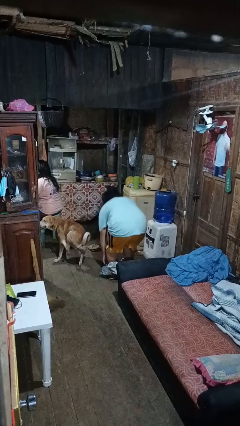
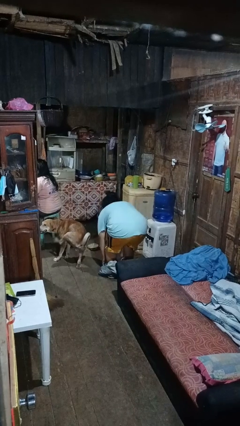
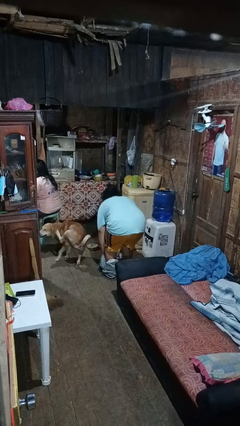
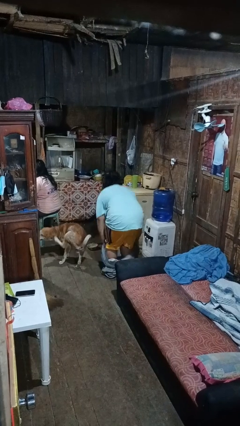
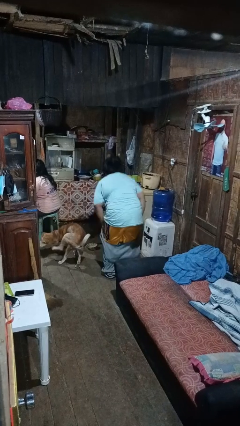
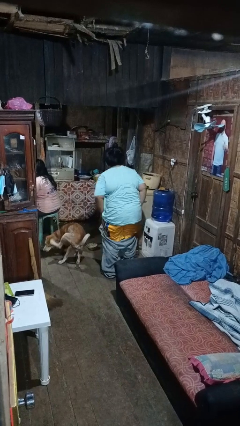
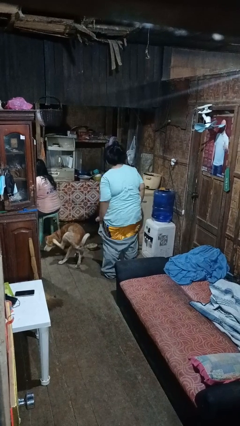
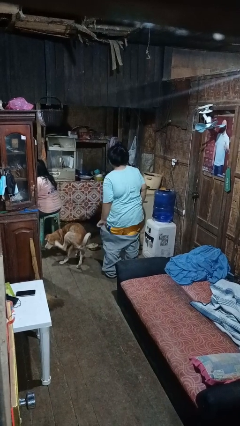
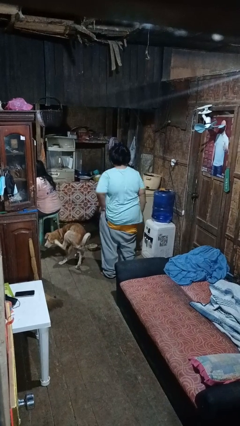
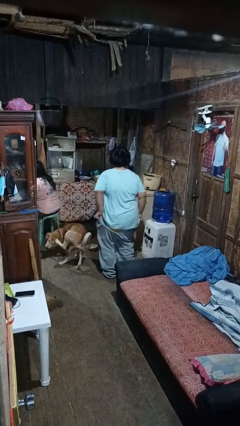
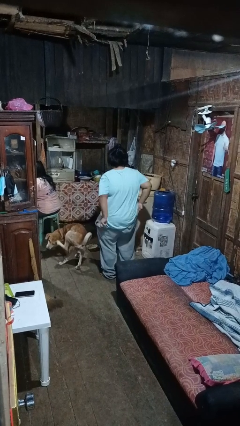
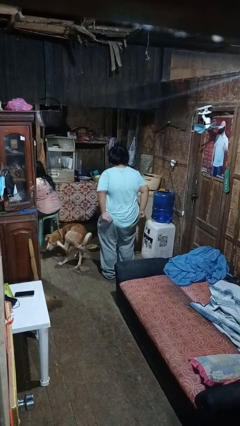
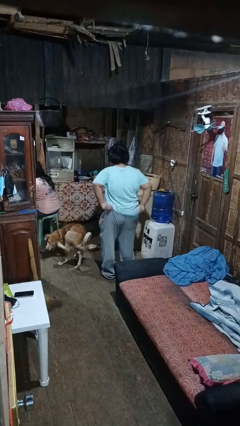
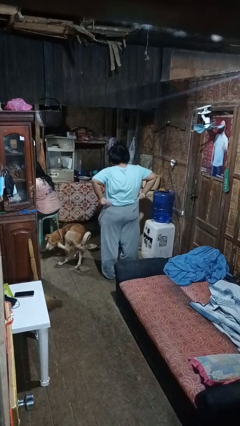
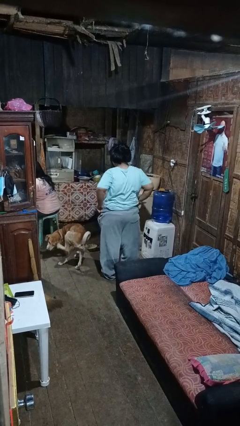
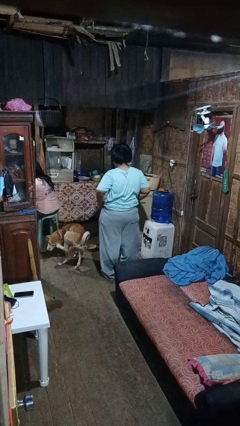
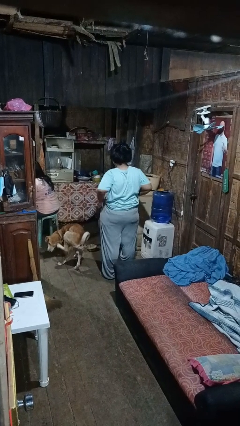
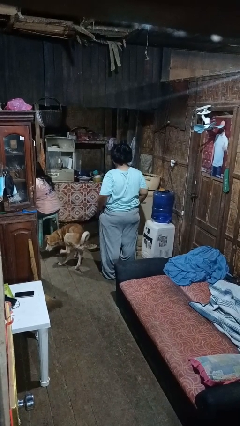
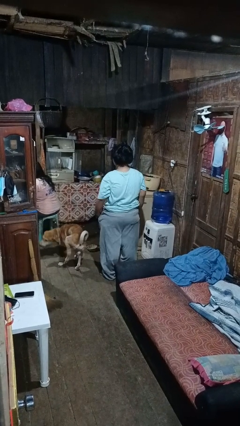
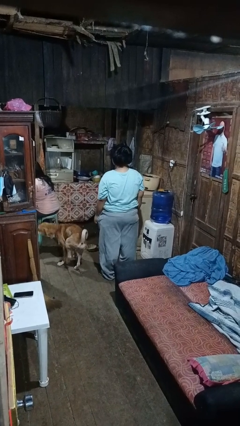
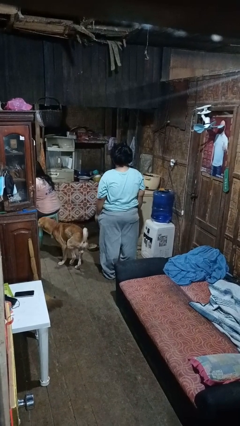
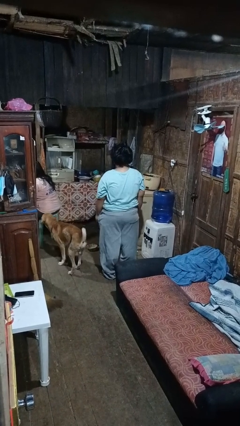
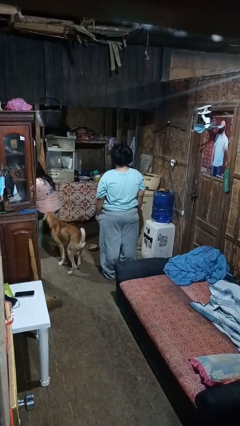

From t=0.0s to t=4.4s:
person puts on pants

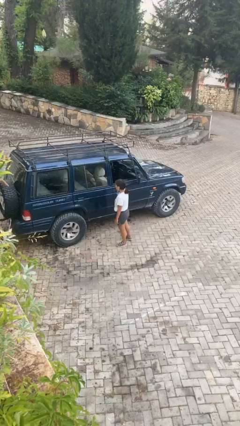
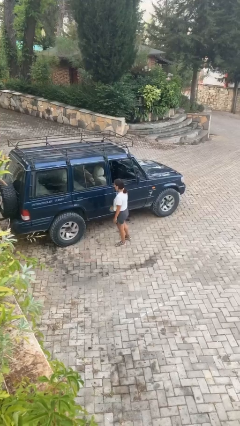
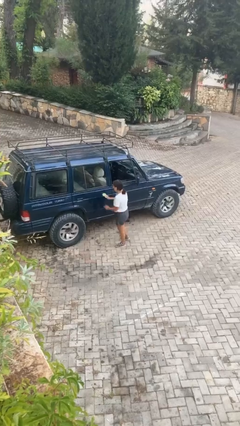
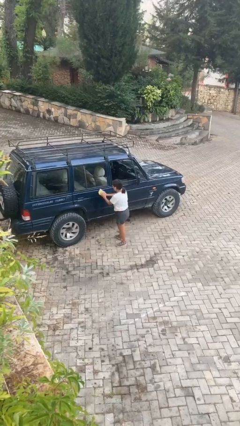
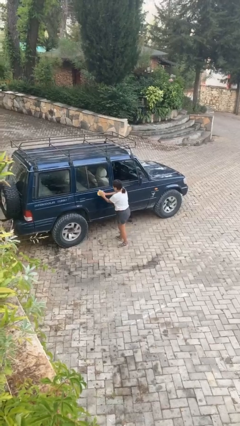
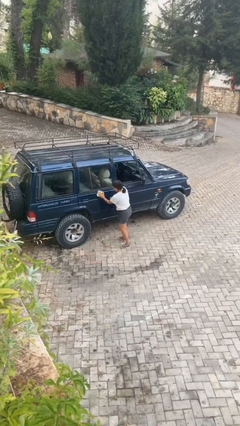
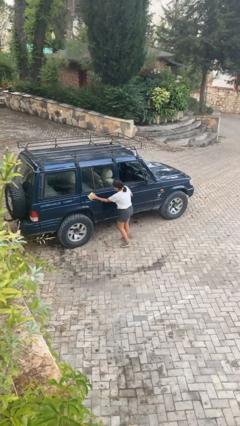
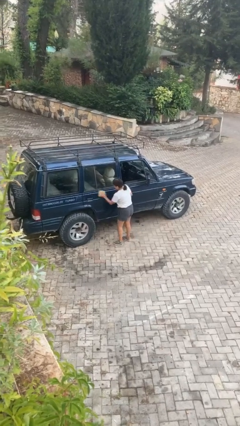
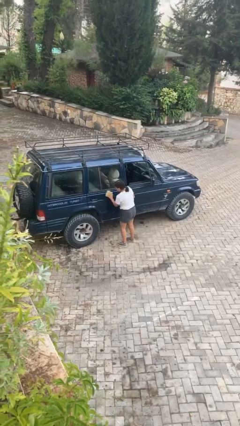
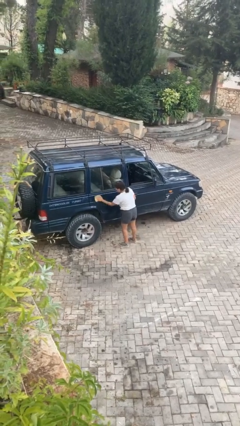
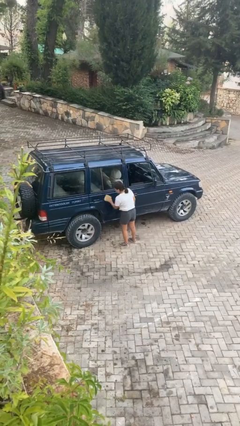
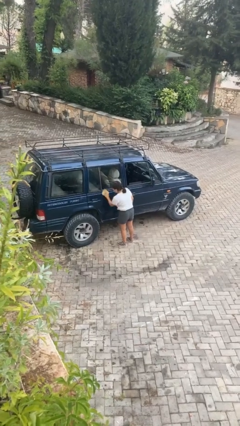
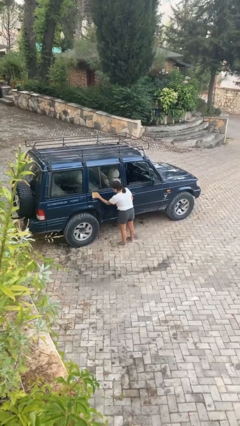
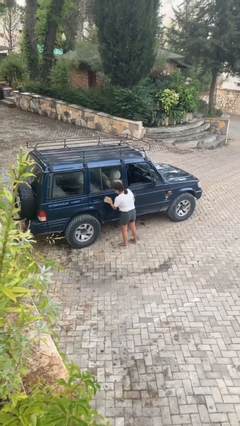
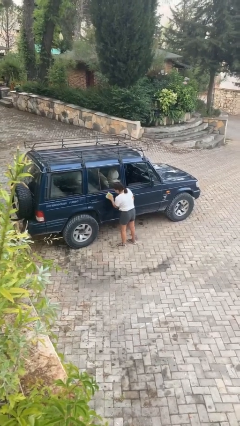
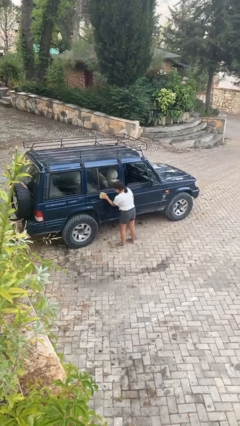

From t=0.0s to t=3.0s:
person polishes car with rag

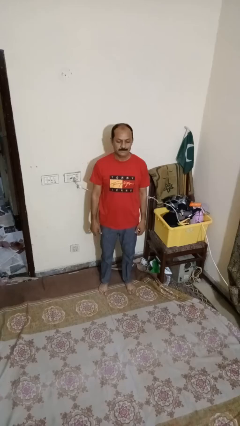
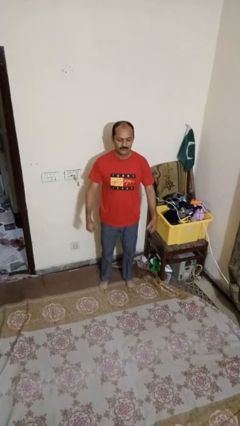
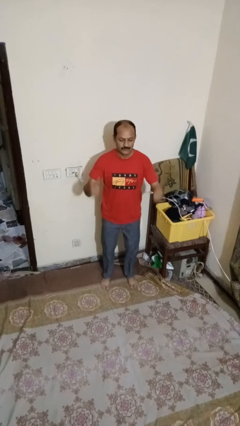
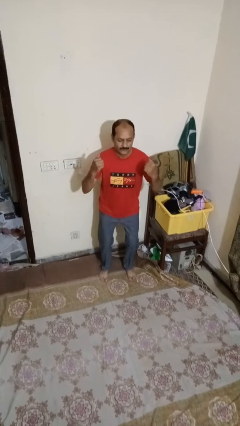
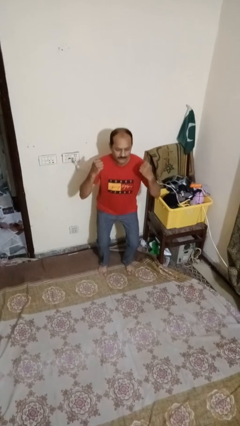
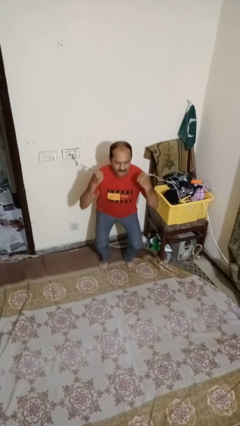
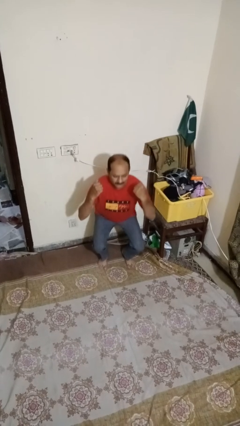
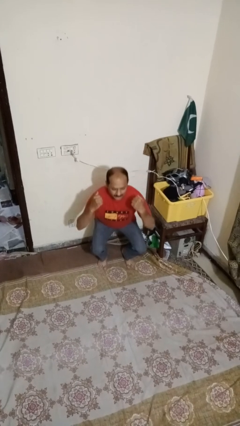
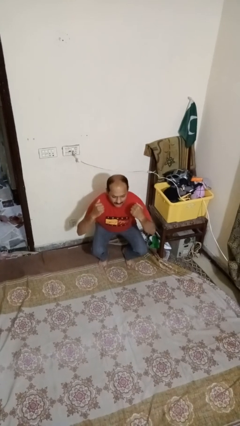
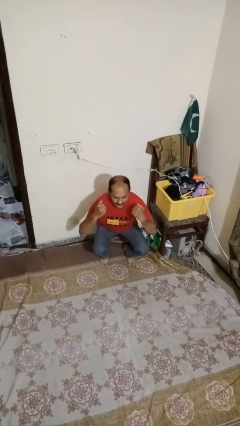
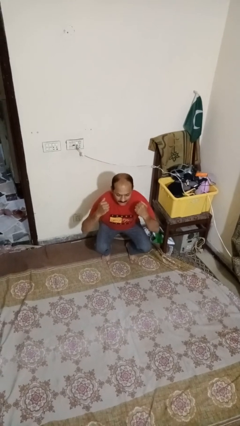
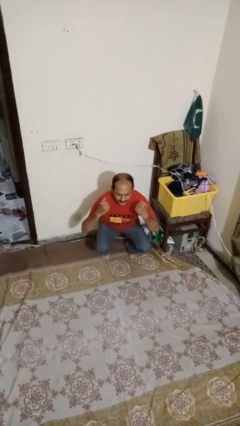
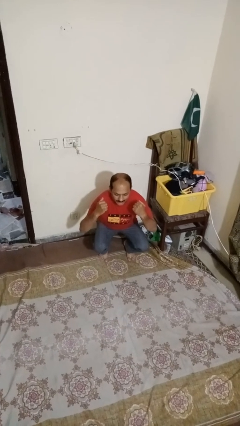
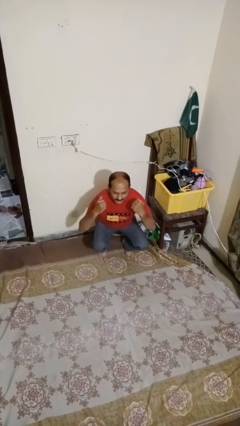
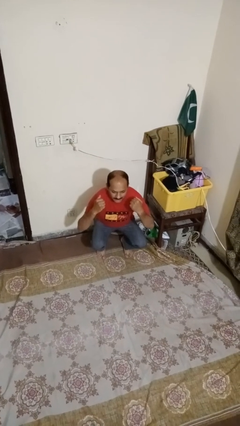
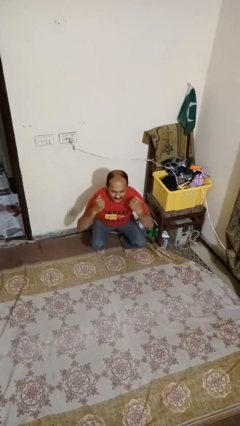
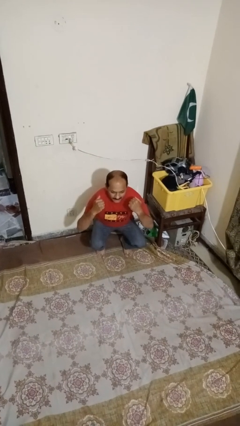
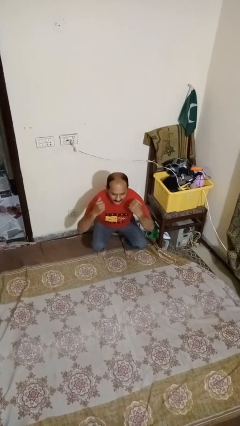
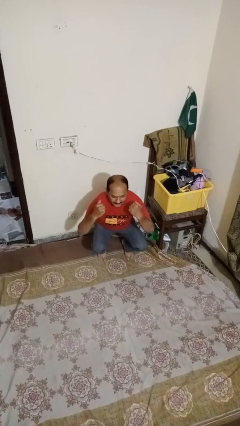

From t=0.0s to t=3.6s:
person squats

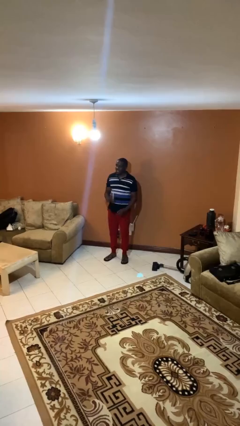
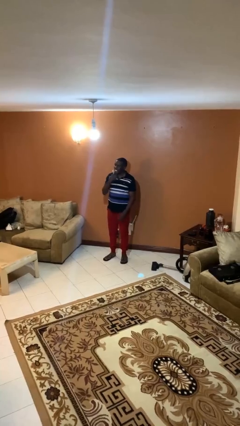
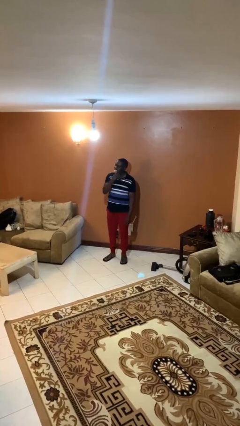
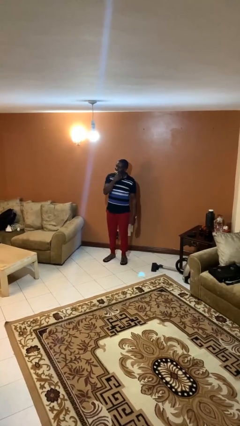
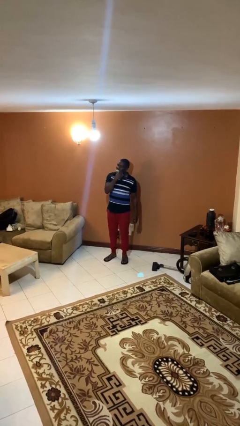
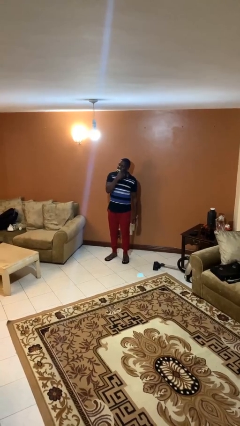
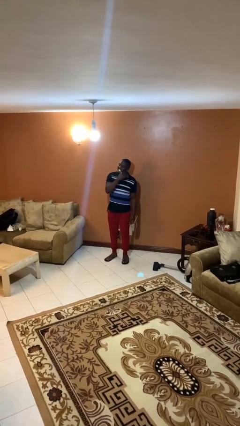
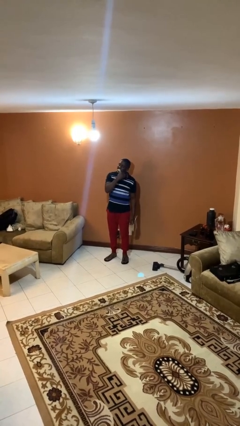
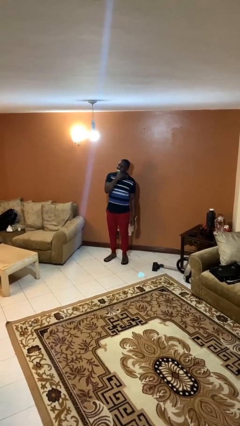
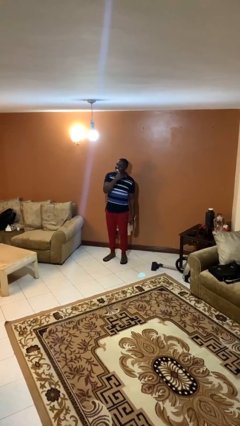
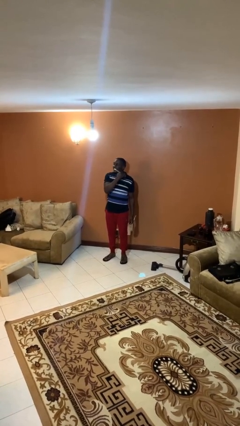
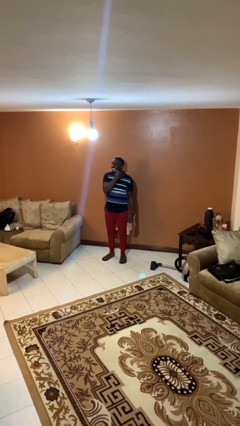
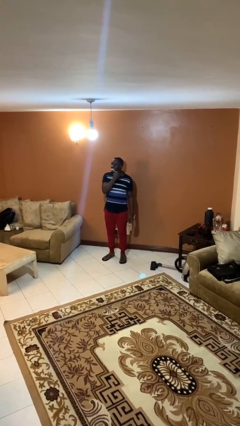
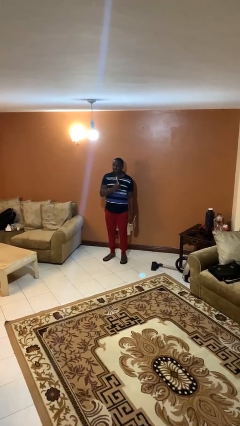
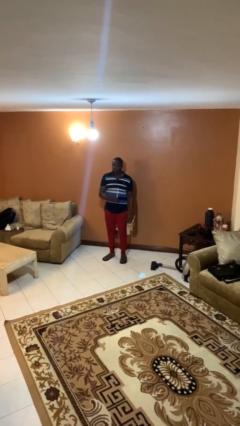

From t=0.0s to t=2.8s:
person brushes teeth

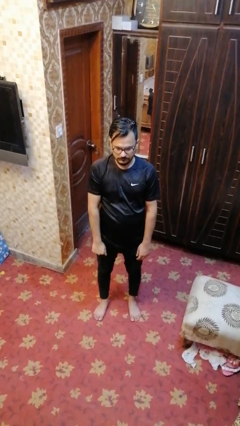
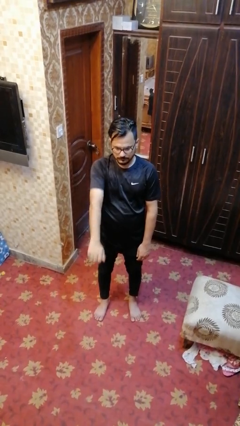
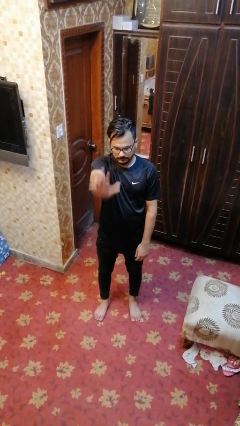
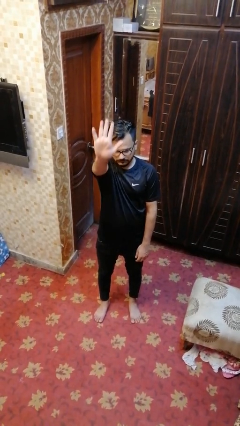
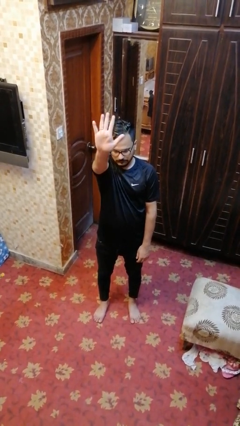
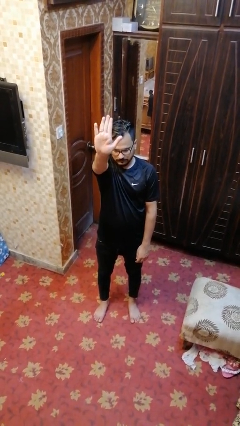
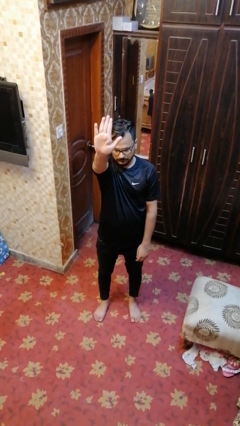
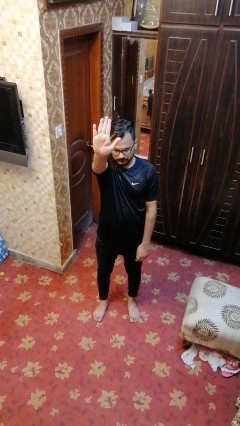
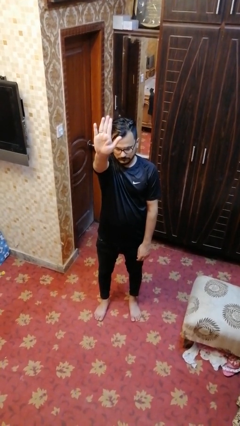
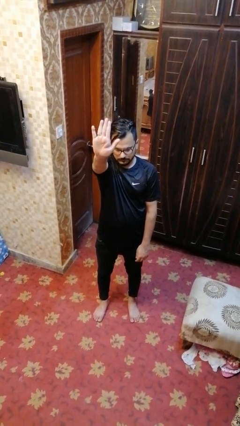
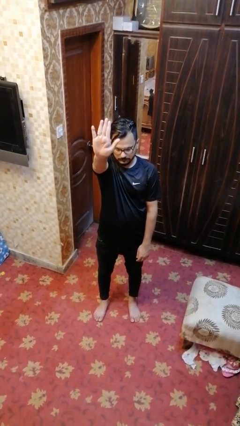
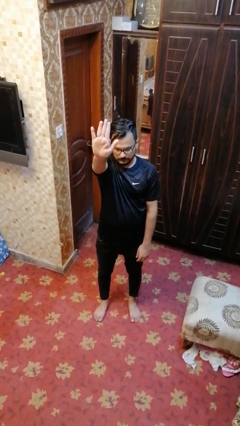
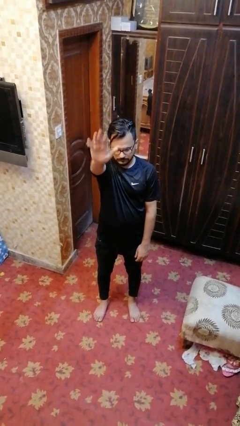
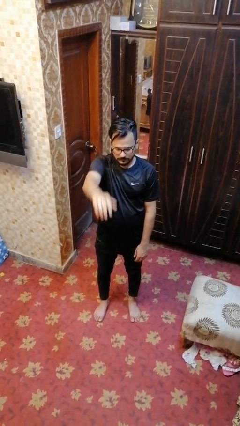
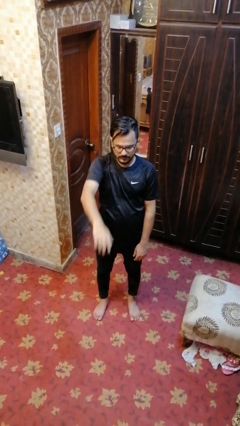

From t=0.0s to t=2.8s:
person gestures number five

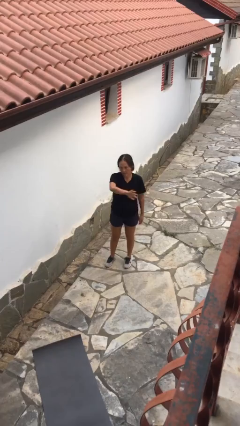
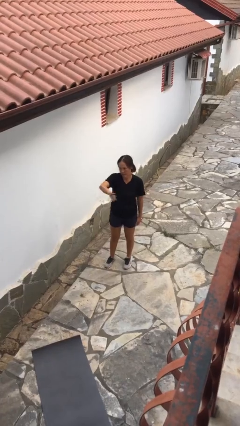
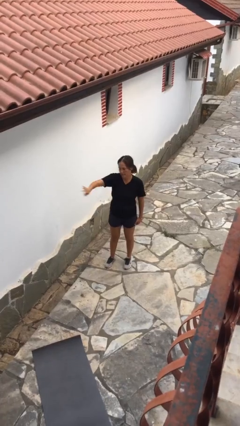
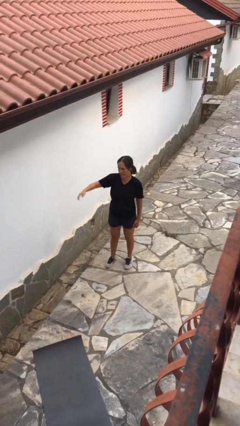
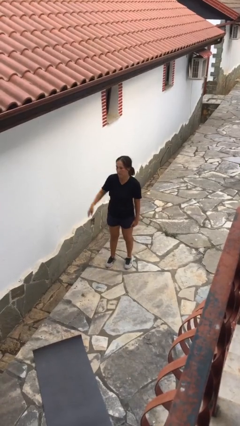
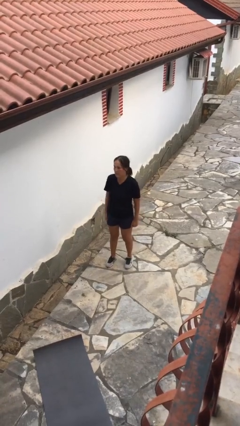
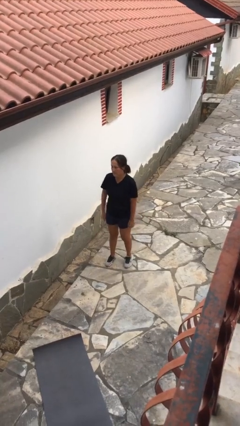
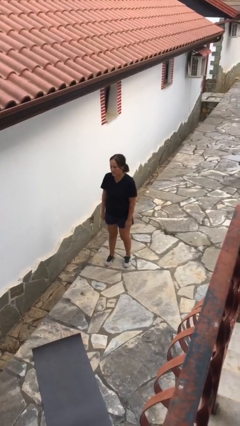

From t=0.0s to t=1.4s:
person gestures swipe right
